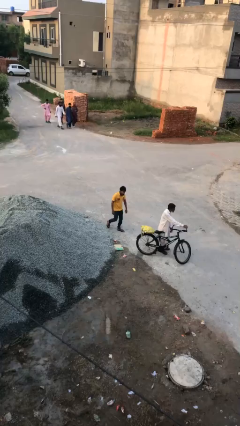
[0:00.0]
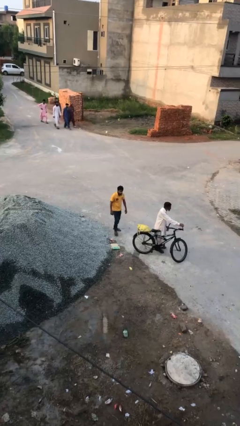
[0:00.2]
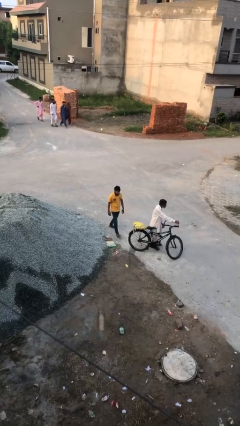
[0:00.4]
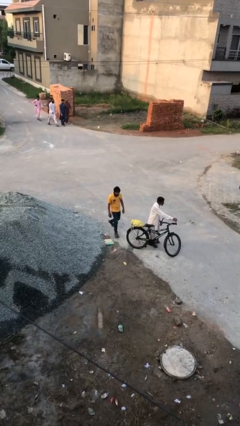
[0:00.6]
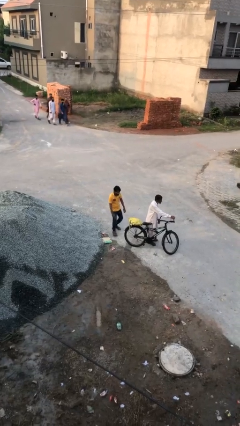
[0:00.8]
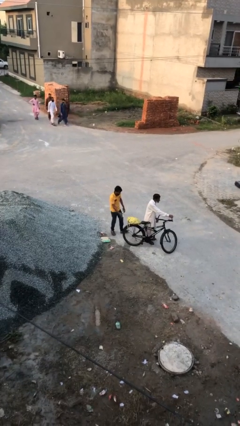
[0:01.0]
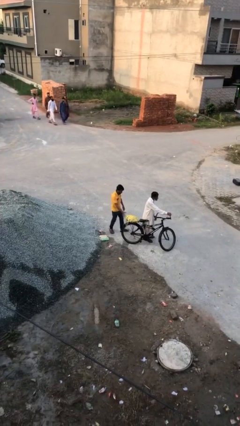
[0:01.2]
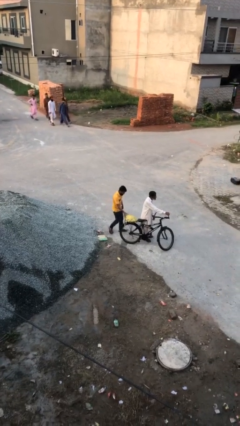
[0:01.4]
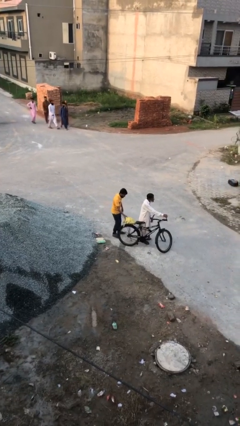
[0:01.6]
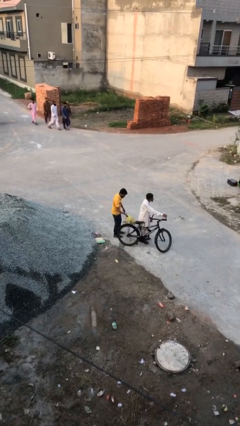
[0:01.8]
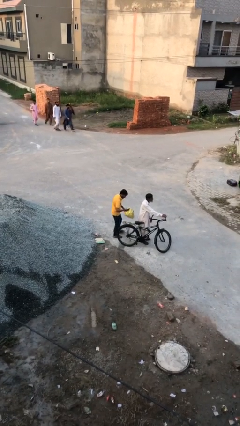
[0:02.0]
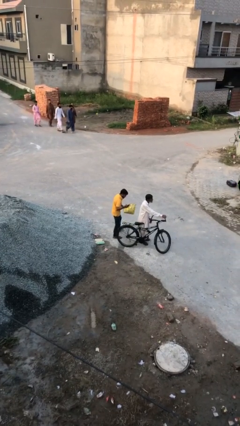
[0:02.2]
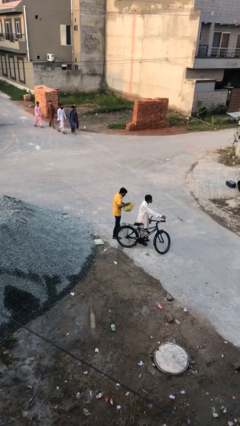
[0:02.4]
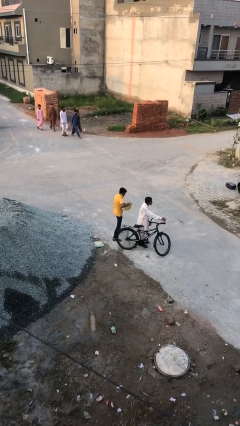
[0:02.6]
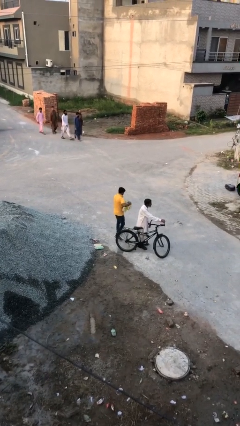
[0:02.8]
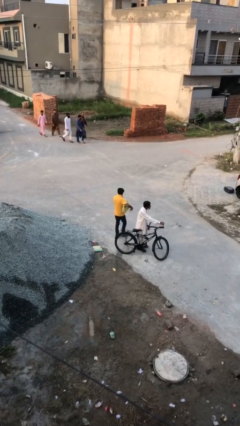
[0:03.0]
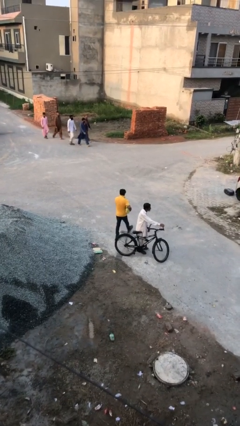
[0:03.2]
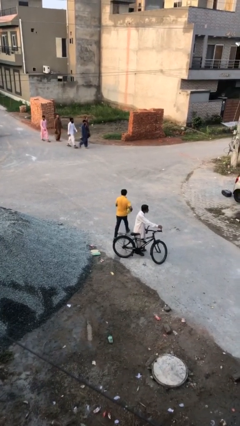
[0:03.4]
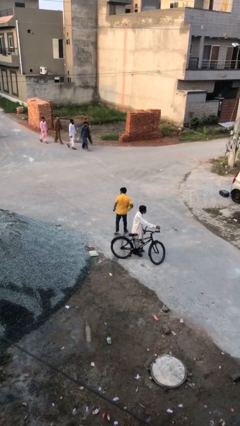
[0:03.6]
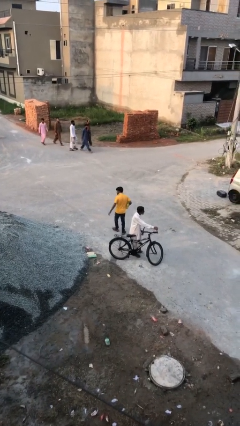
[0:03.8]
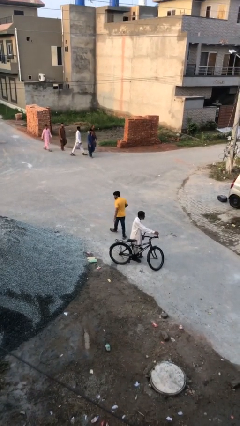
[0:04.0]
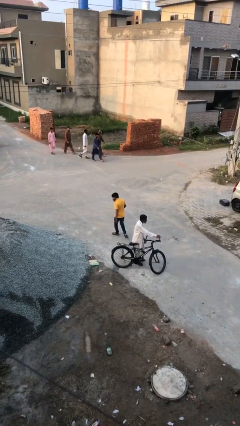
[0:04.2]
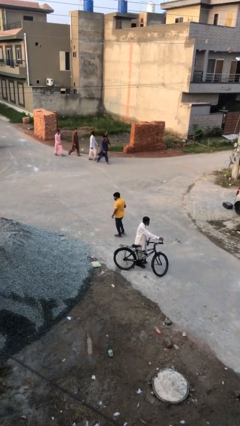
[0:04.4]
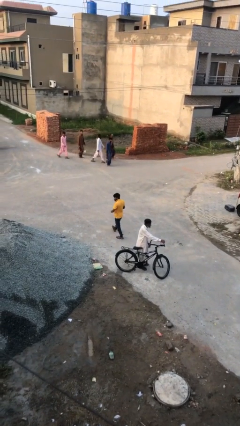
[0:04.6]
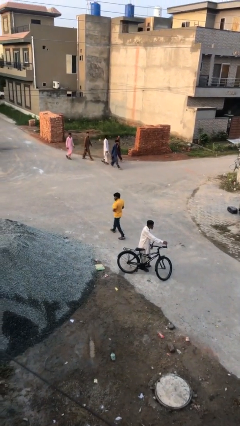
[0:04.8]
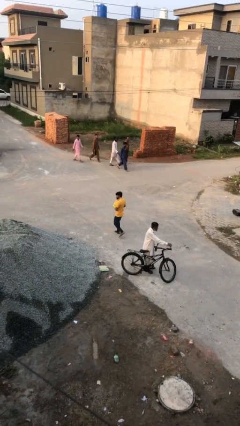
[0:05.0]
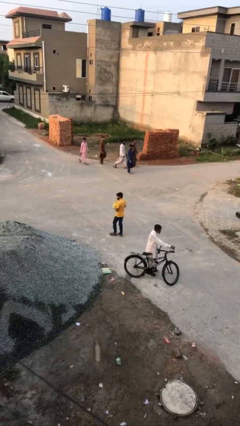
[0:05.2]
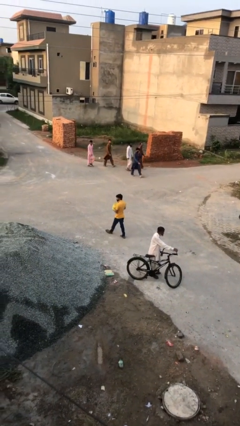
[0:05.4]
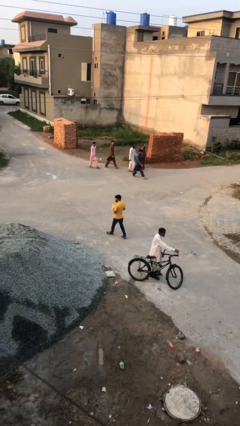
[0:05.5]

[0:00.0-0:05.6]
person steals object from person

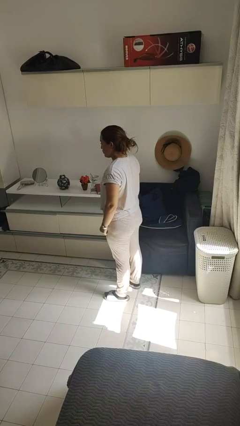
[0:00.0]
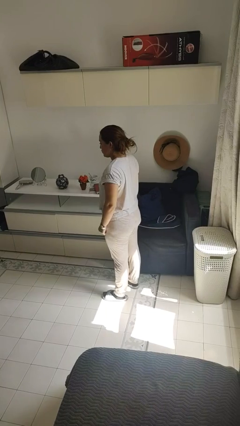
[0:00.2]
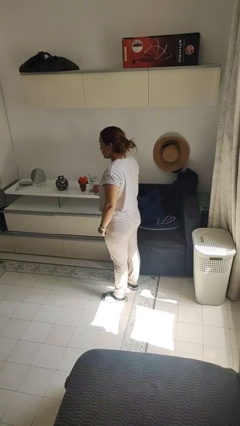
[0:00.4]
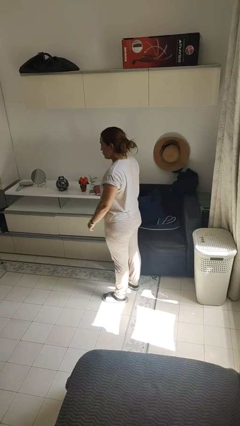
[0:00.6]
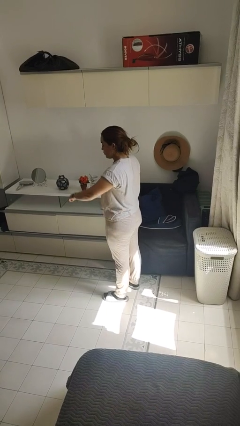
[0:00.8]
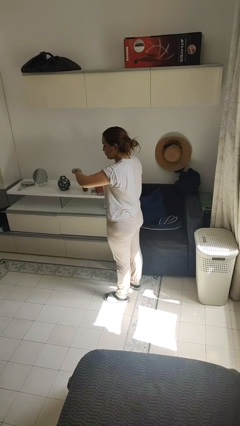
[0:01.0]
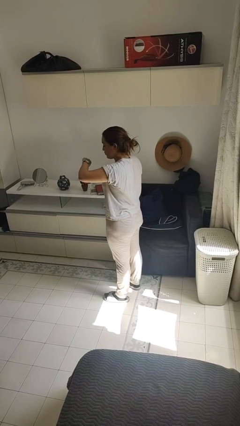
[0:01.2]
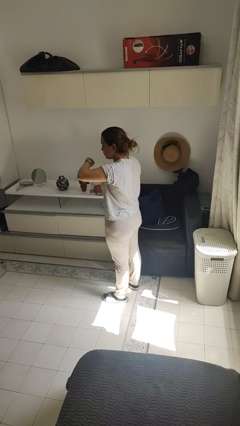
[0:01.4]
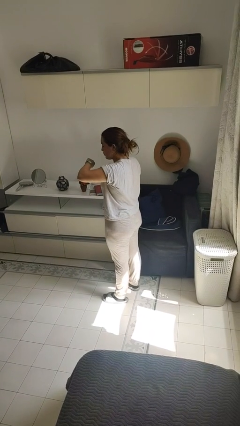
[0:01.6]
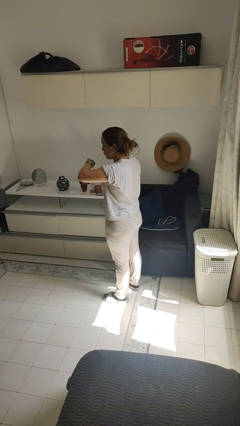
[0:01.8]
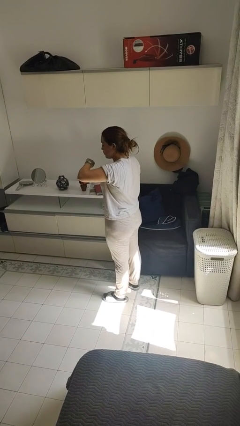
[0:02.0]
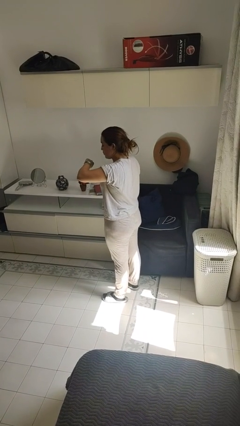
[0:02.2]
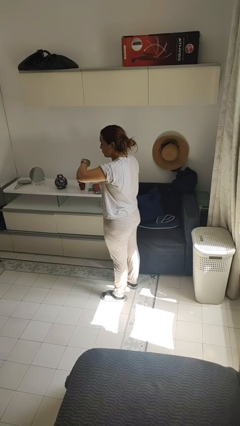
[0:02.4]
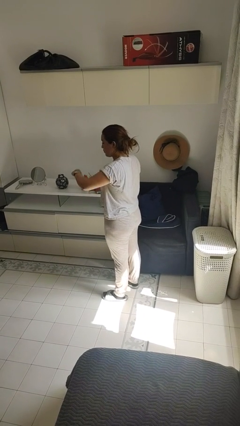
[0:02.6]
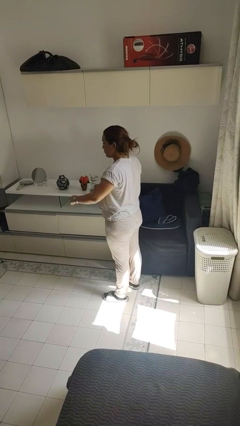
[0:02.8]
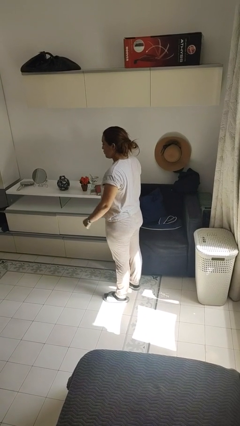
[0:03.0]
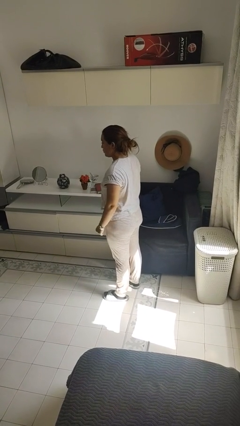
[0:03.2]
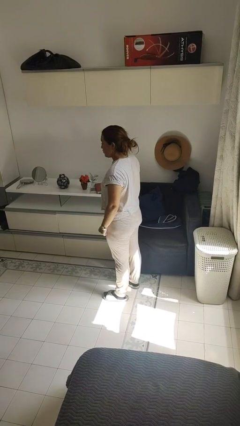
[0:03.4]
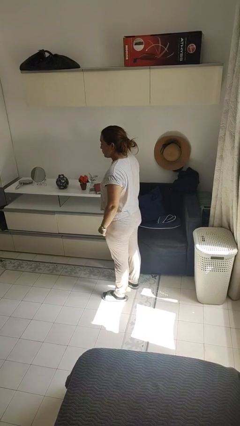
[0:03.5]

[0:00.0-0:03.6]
person looks at wristwatch

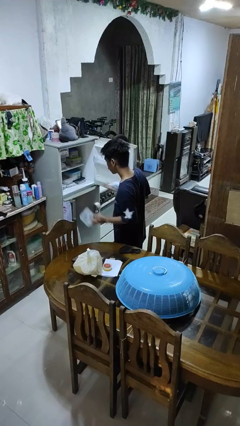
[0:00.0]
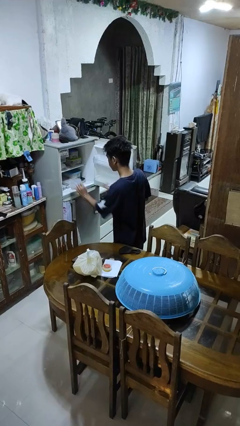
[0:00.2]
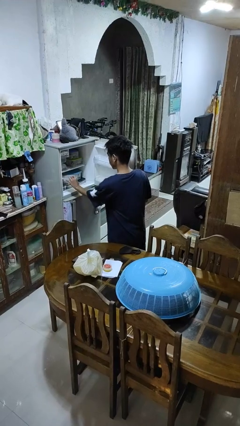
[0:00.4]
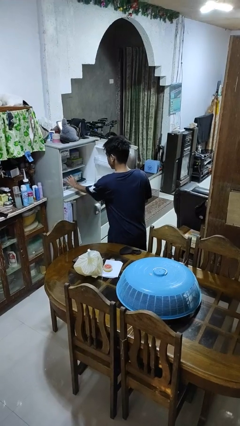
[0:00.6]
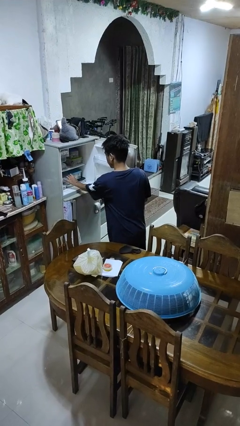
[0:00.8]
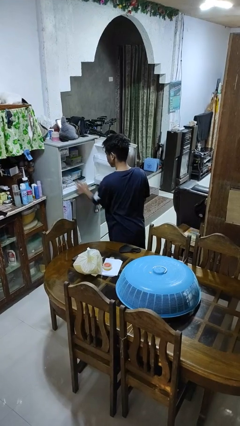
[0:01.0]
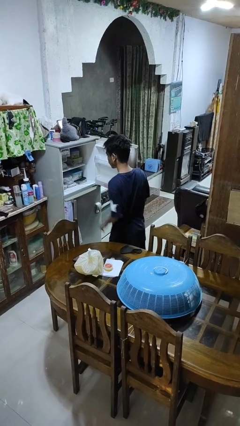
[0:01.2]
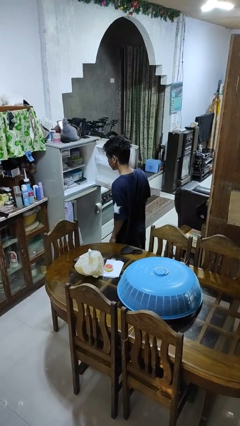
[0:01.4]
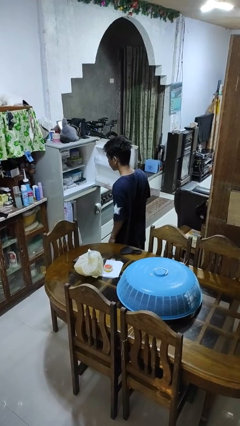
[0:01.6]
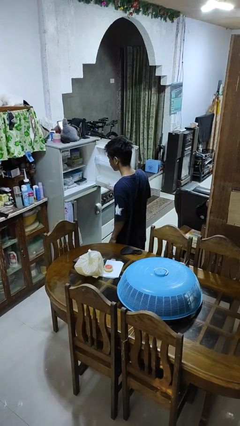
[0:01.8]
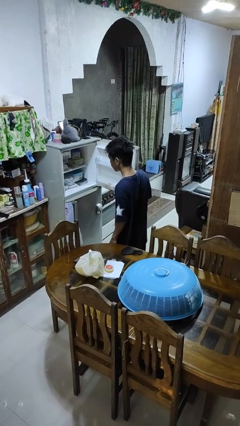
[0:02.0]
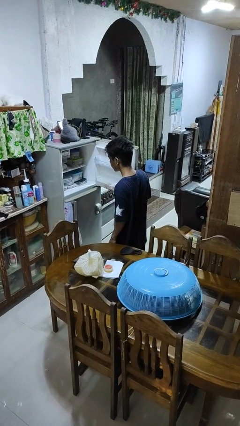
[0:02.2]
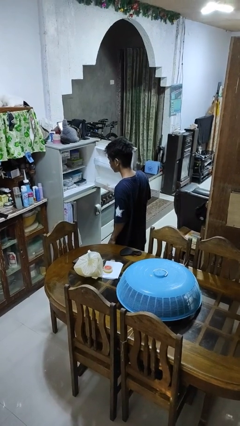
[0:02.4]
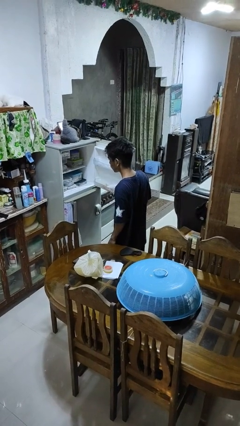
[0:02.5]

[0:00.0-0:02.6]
person puts object into refrigerator

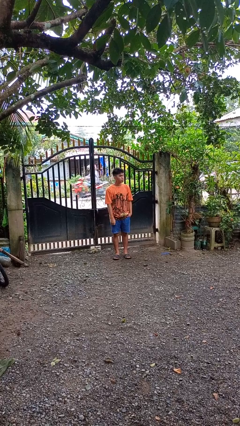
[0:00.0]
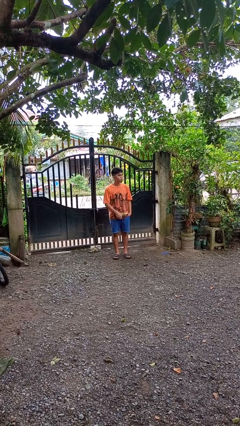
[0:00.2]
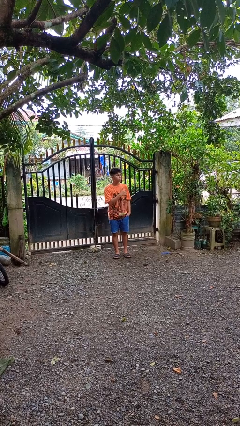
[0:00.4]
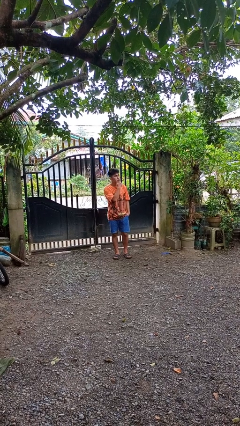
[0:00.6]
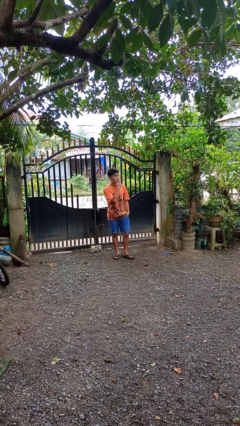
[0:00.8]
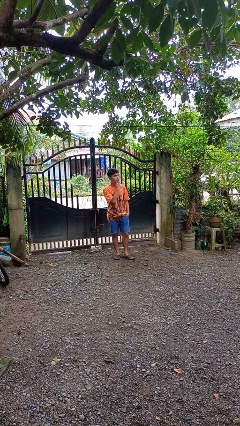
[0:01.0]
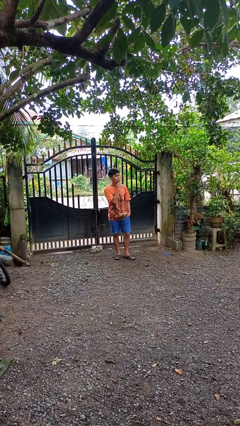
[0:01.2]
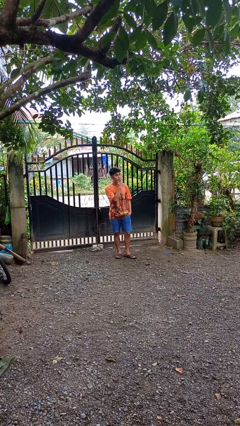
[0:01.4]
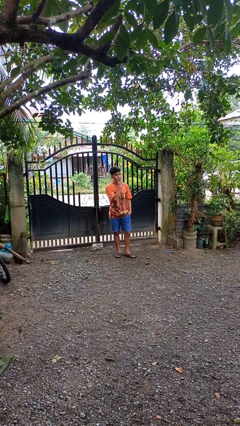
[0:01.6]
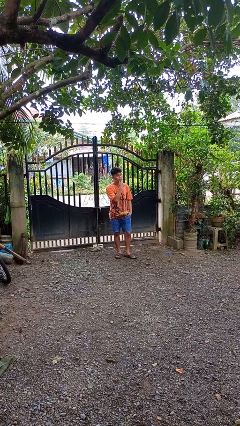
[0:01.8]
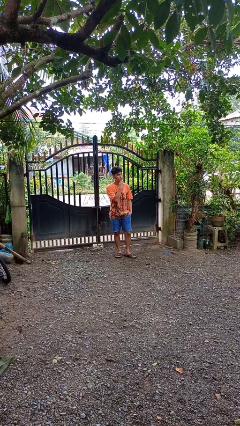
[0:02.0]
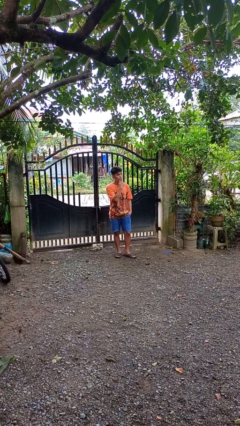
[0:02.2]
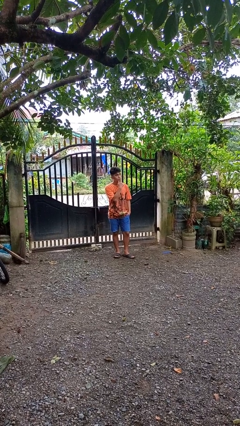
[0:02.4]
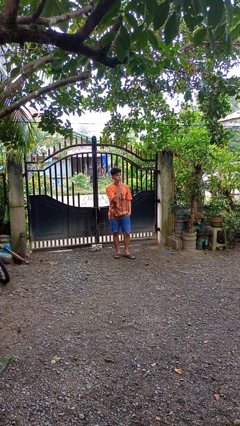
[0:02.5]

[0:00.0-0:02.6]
person strokes chin

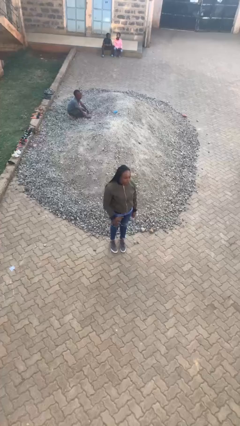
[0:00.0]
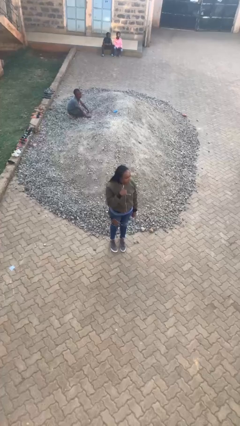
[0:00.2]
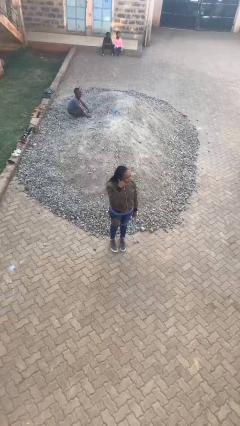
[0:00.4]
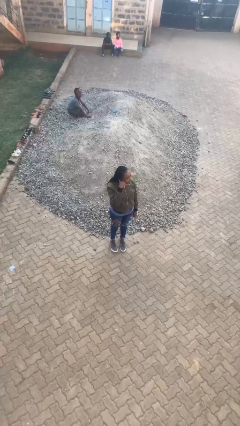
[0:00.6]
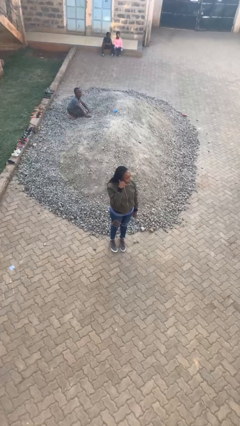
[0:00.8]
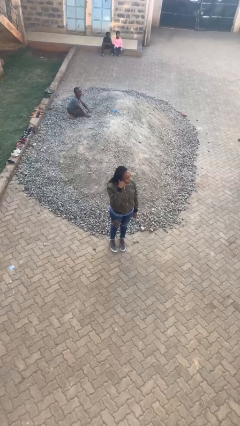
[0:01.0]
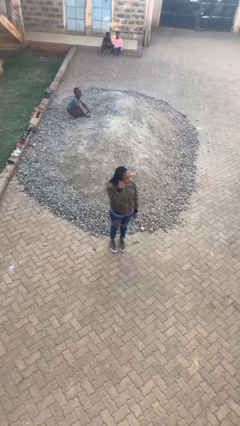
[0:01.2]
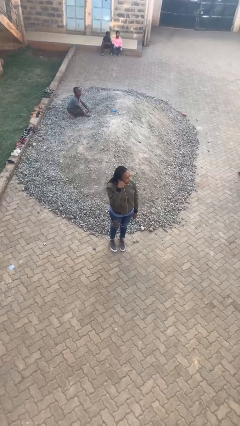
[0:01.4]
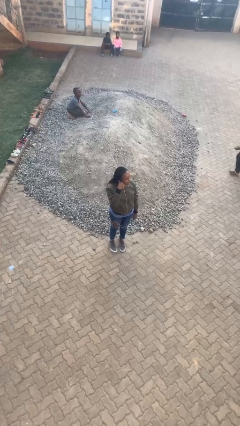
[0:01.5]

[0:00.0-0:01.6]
person gestures call me

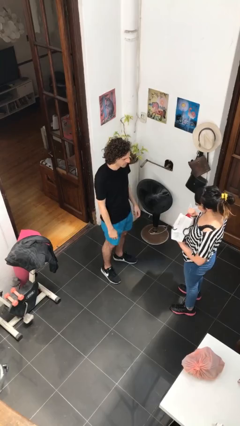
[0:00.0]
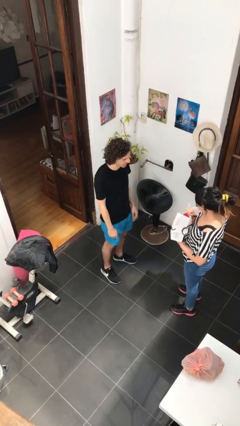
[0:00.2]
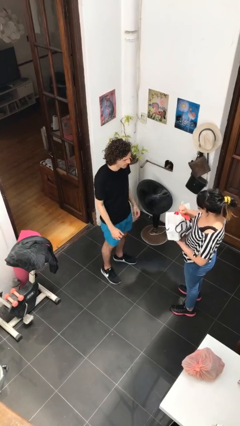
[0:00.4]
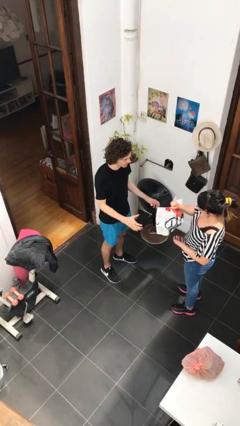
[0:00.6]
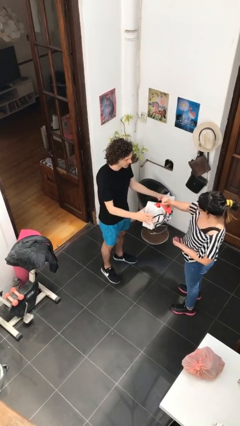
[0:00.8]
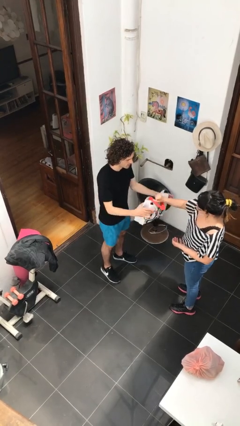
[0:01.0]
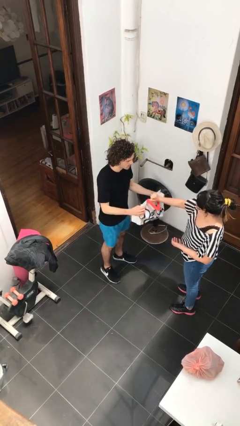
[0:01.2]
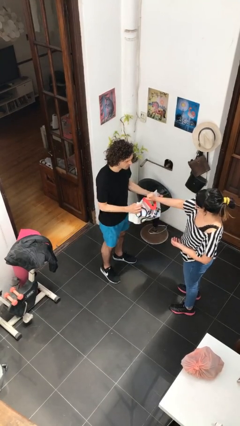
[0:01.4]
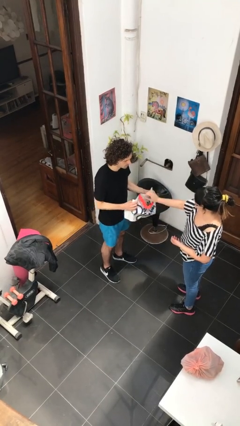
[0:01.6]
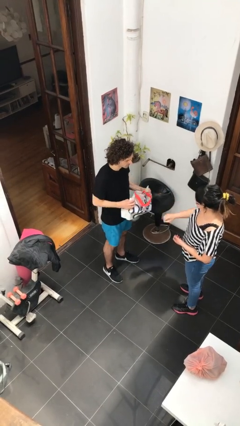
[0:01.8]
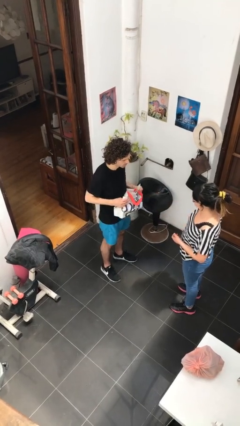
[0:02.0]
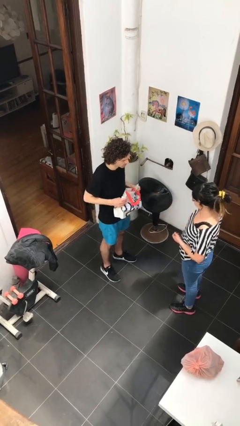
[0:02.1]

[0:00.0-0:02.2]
person transfers object to person
